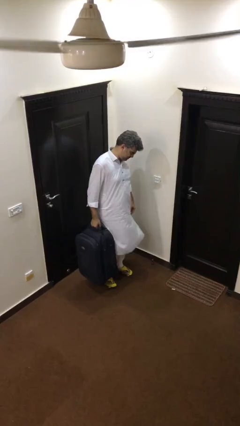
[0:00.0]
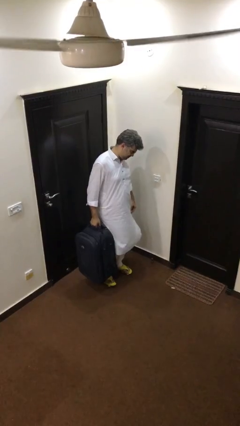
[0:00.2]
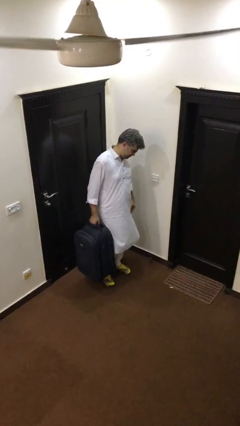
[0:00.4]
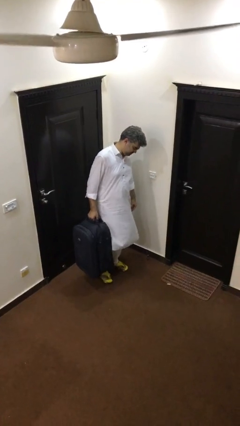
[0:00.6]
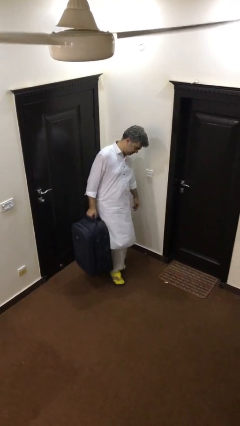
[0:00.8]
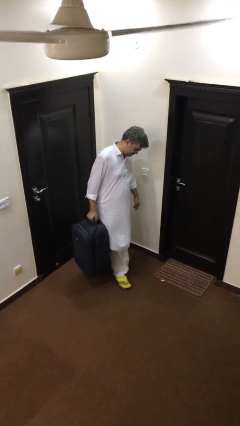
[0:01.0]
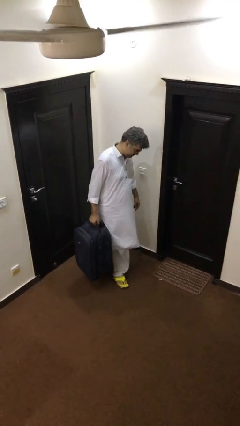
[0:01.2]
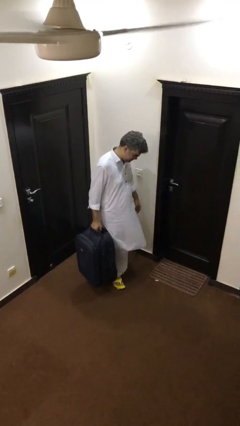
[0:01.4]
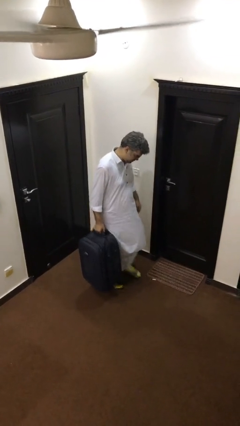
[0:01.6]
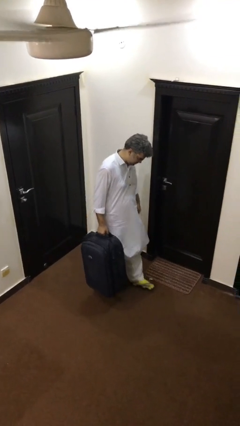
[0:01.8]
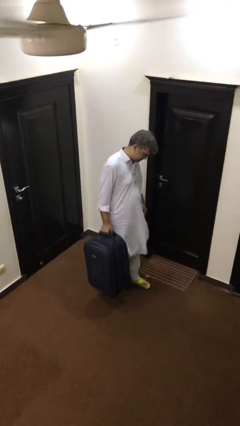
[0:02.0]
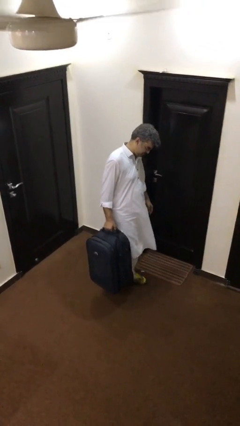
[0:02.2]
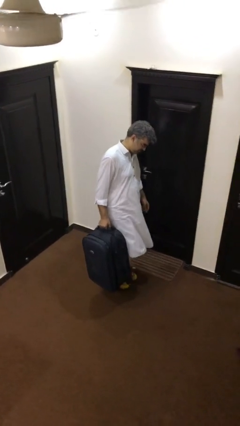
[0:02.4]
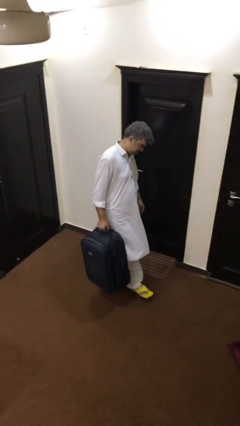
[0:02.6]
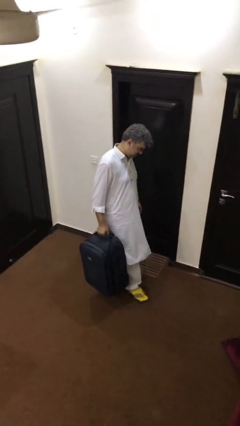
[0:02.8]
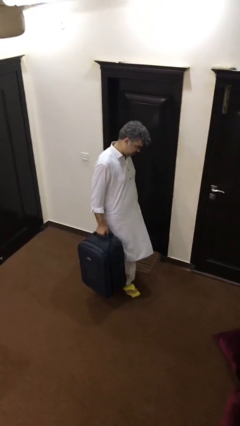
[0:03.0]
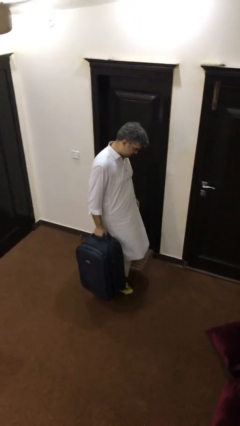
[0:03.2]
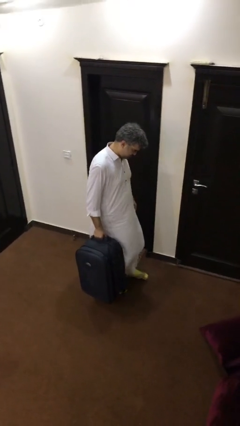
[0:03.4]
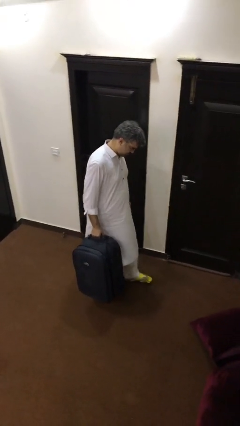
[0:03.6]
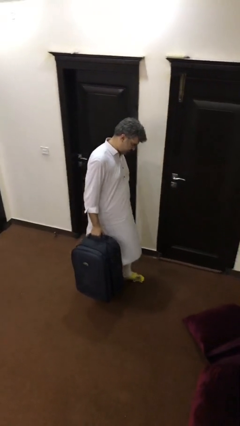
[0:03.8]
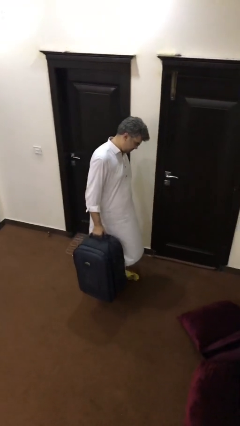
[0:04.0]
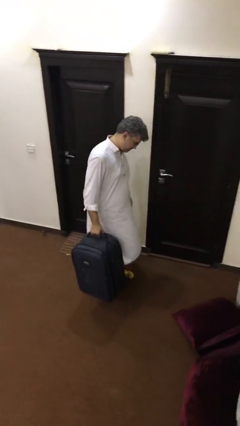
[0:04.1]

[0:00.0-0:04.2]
person carries heavy object

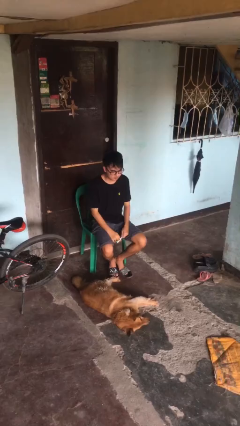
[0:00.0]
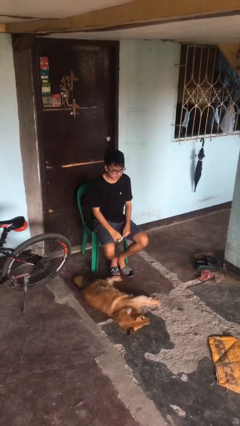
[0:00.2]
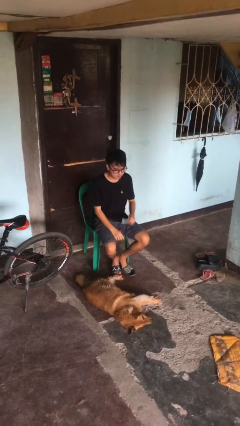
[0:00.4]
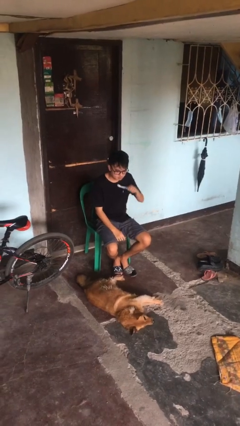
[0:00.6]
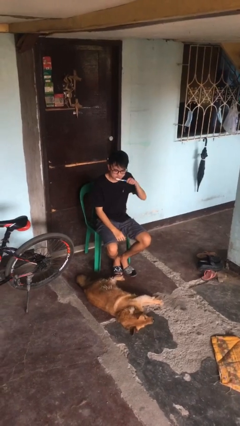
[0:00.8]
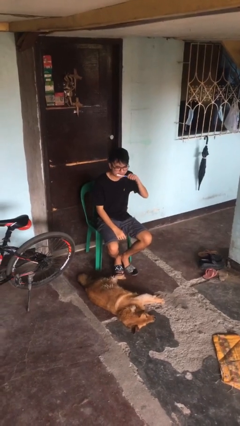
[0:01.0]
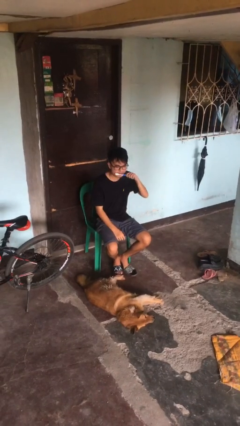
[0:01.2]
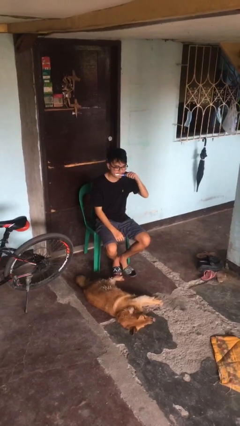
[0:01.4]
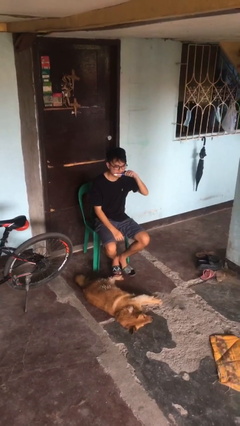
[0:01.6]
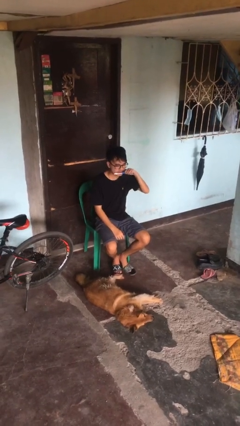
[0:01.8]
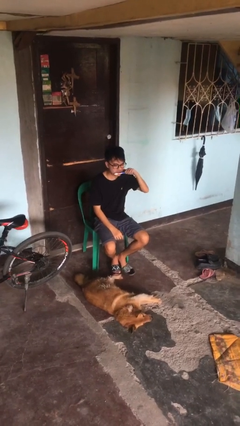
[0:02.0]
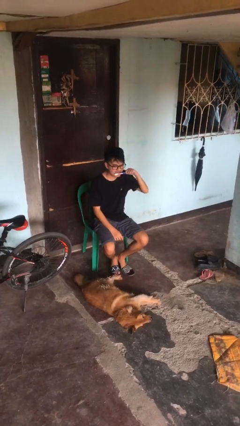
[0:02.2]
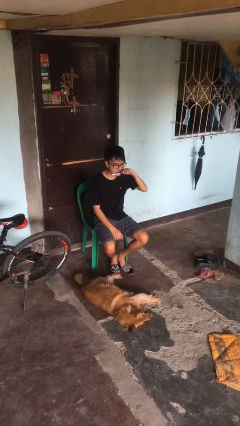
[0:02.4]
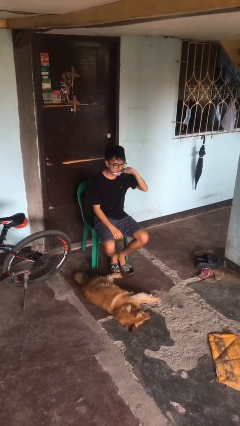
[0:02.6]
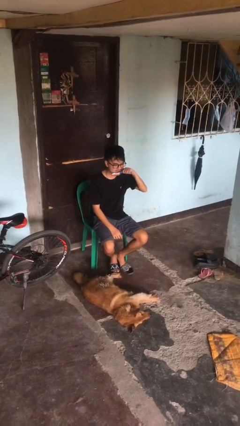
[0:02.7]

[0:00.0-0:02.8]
person brushes teeth

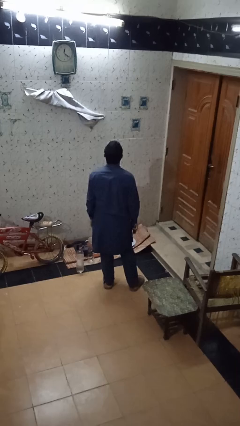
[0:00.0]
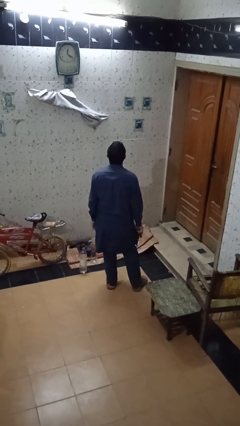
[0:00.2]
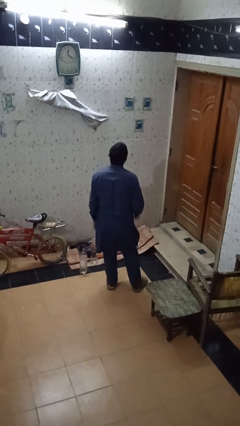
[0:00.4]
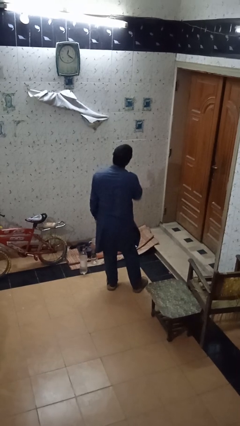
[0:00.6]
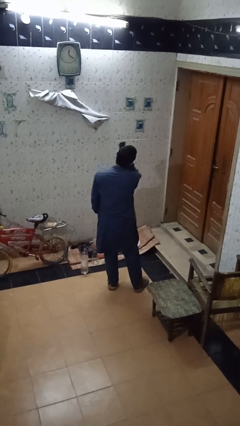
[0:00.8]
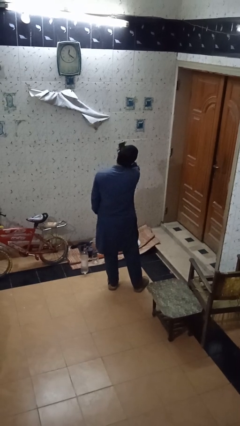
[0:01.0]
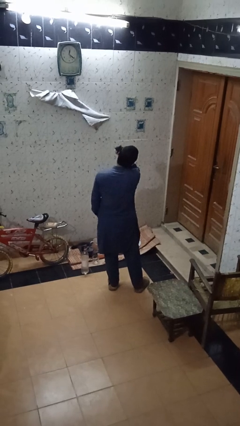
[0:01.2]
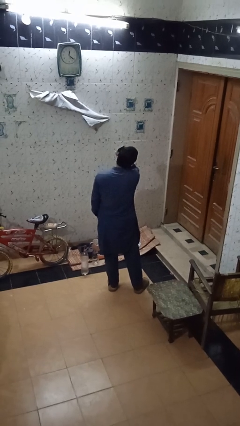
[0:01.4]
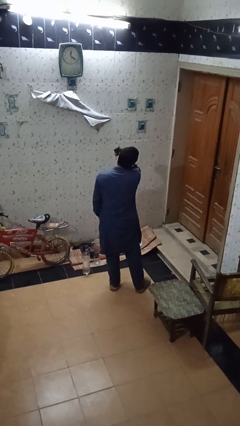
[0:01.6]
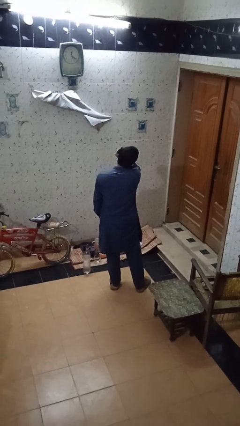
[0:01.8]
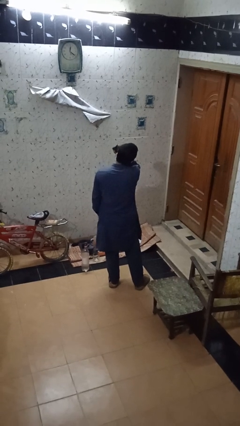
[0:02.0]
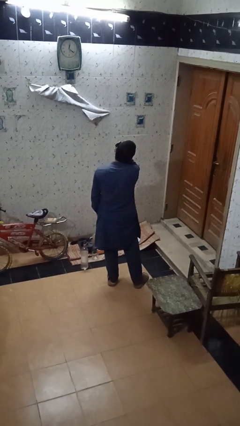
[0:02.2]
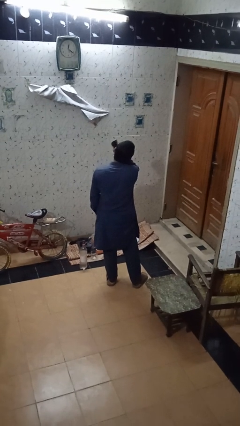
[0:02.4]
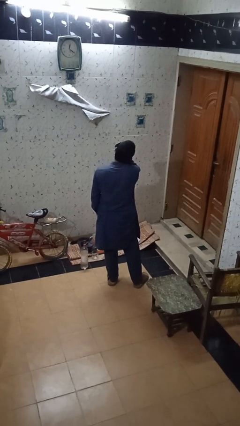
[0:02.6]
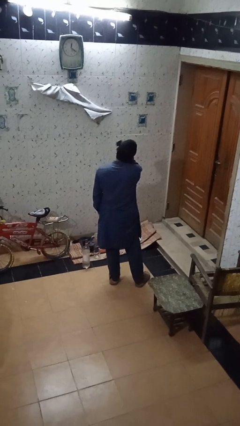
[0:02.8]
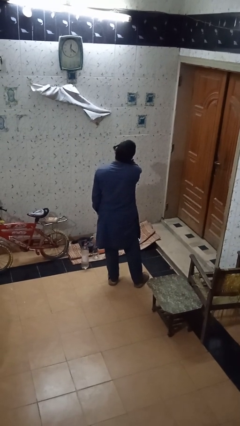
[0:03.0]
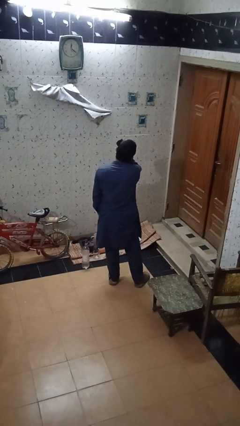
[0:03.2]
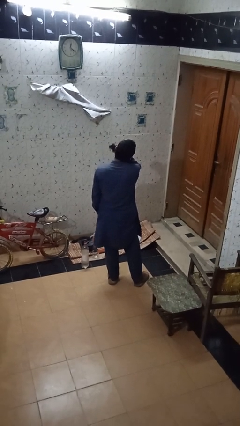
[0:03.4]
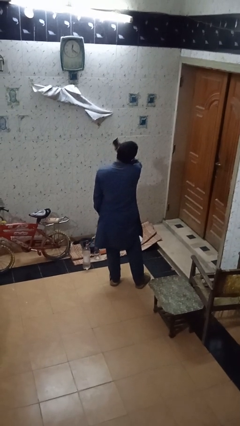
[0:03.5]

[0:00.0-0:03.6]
person brushes hair

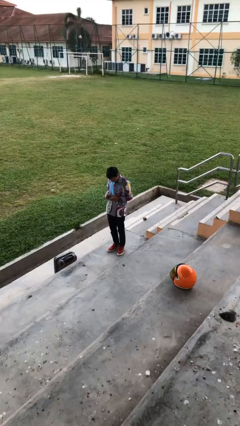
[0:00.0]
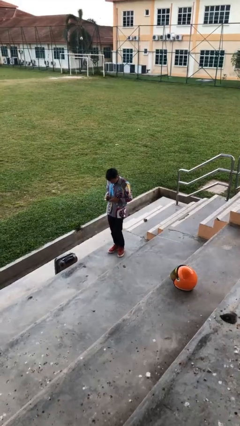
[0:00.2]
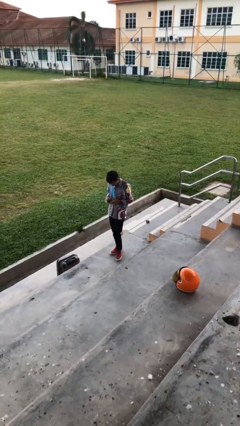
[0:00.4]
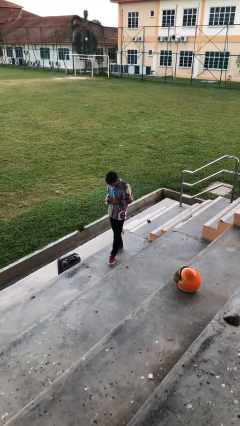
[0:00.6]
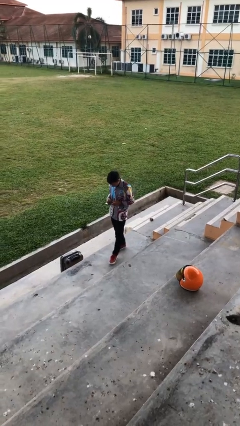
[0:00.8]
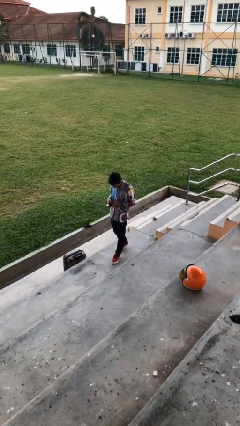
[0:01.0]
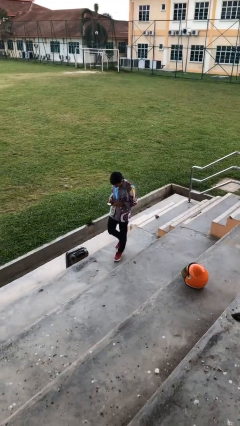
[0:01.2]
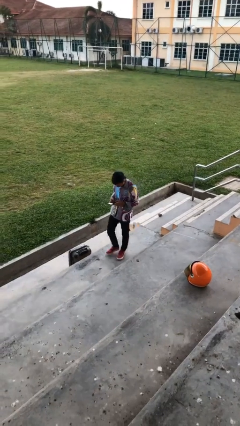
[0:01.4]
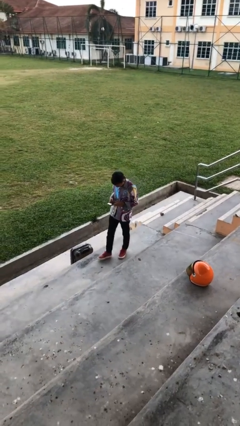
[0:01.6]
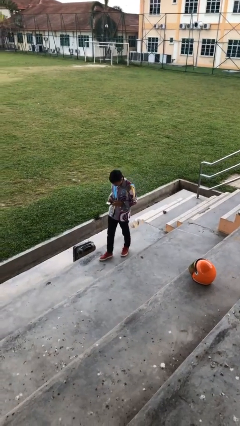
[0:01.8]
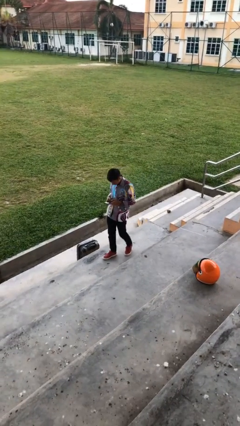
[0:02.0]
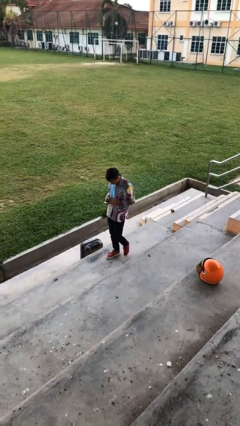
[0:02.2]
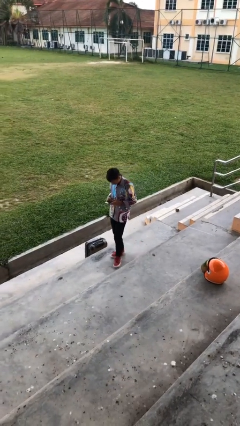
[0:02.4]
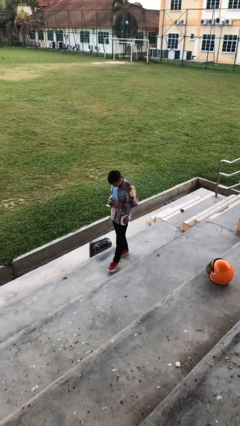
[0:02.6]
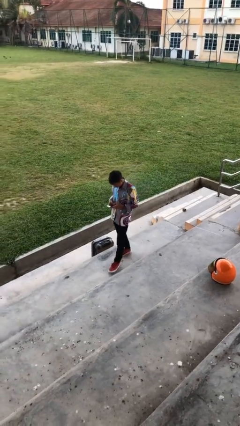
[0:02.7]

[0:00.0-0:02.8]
person texts on phone

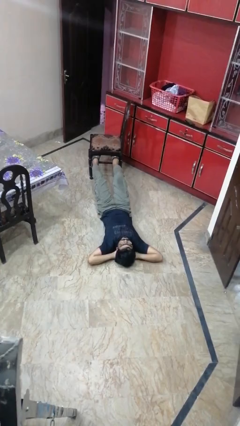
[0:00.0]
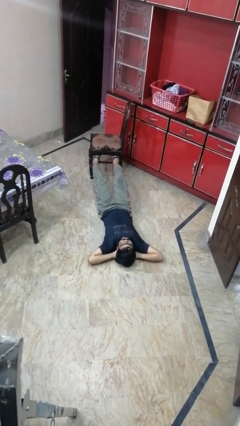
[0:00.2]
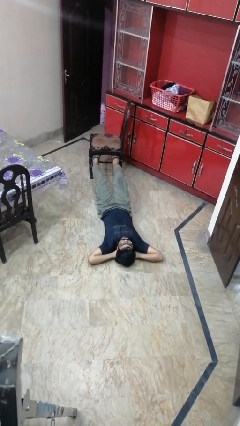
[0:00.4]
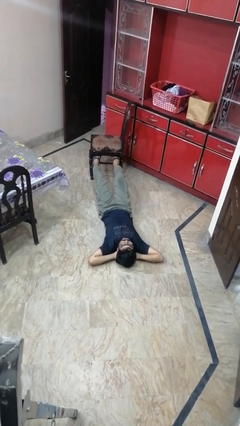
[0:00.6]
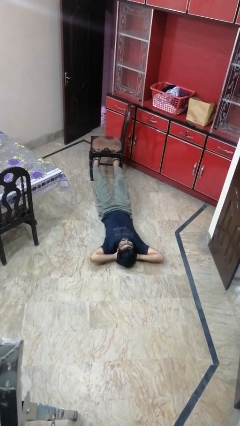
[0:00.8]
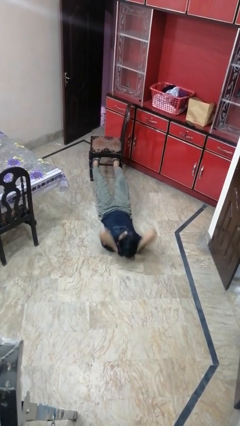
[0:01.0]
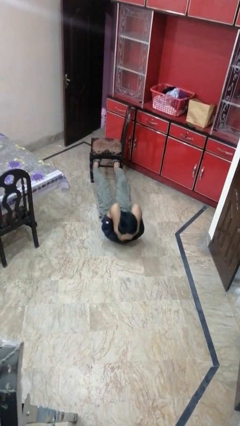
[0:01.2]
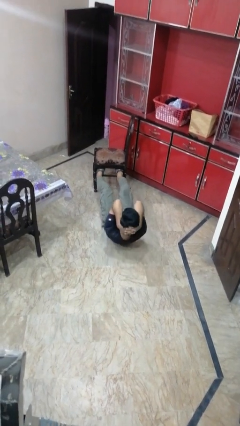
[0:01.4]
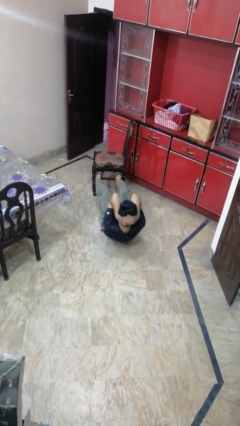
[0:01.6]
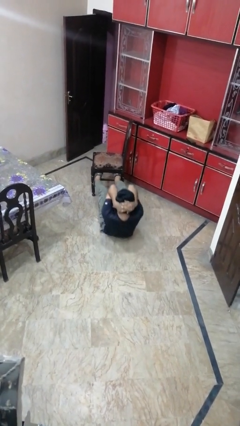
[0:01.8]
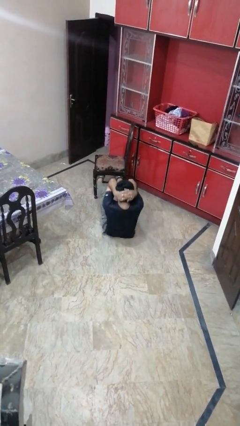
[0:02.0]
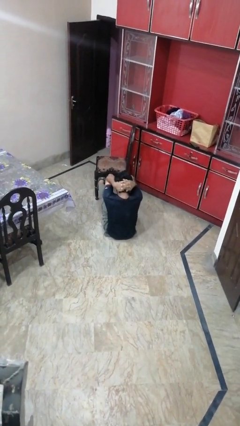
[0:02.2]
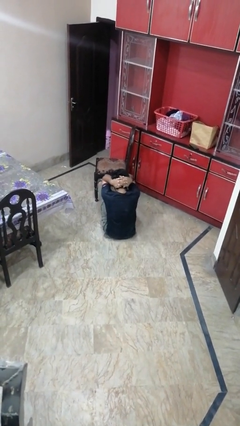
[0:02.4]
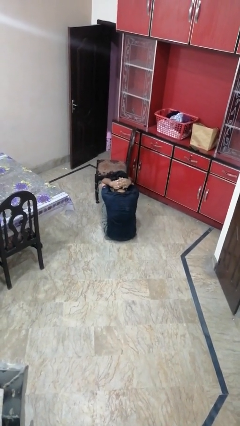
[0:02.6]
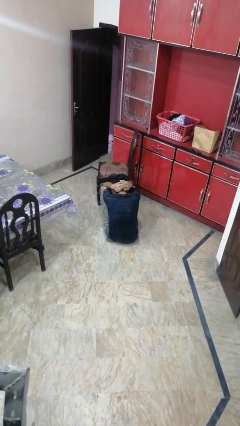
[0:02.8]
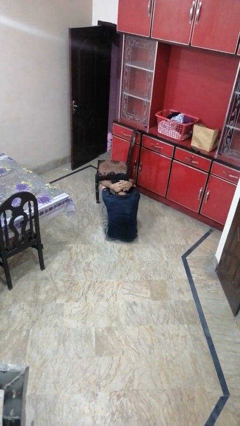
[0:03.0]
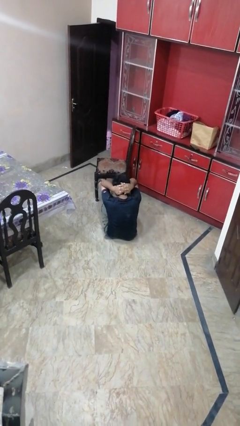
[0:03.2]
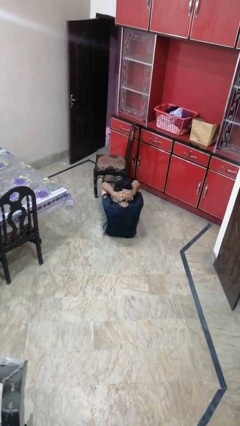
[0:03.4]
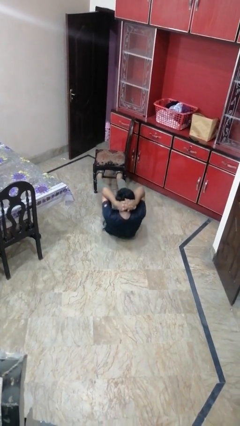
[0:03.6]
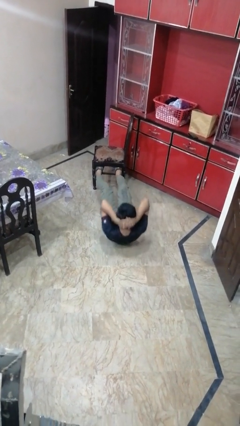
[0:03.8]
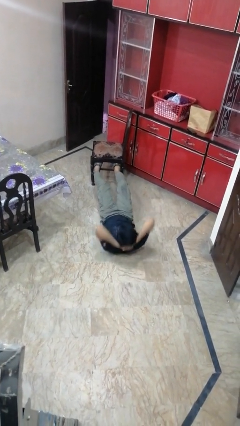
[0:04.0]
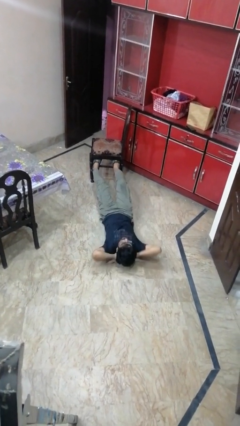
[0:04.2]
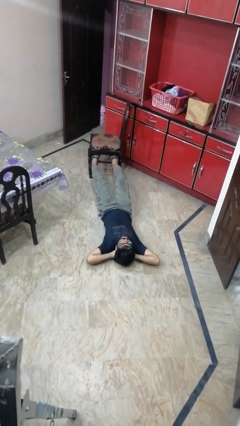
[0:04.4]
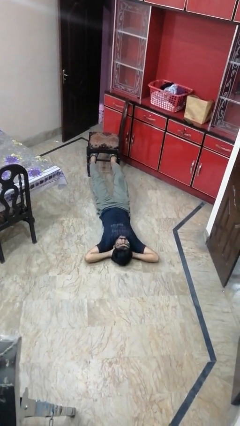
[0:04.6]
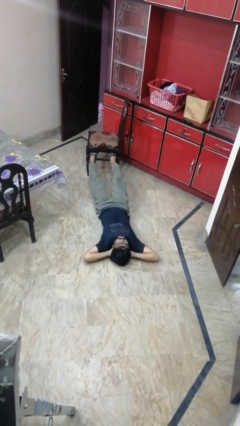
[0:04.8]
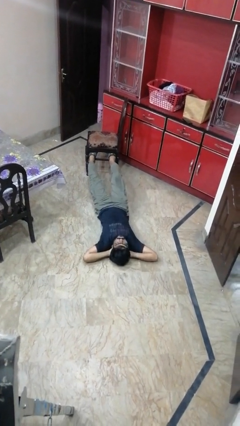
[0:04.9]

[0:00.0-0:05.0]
person exercises with situp
